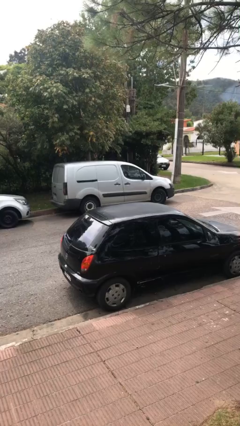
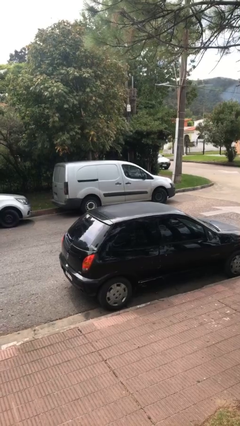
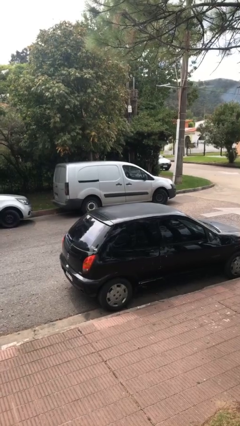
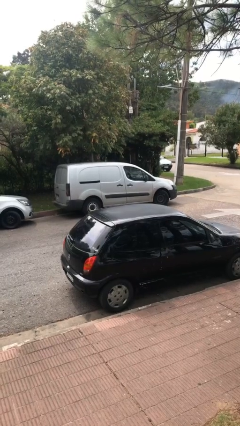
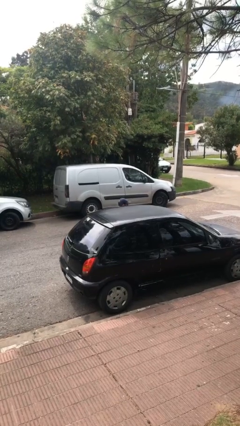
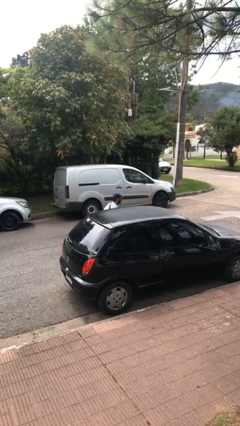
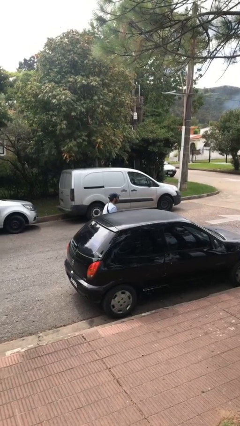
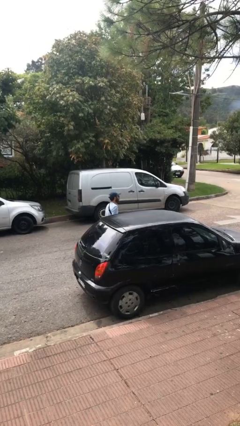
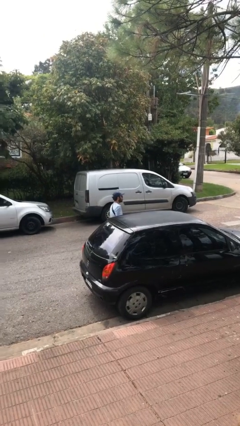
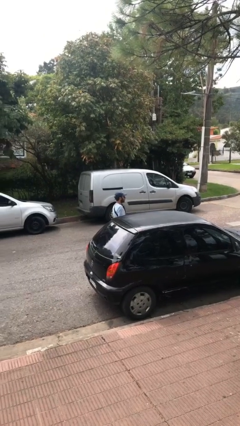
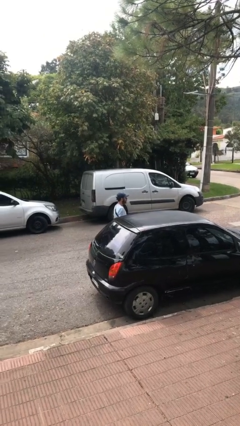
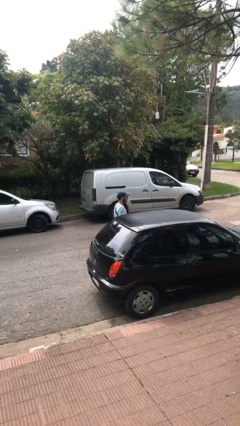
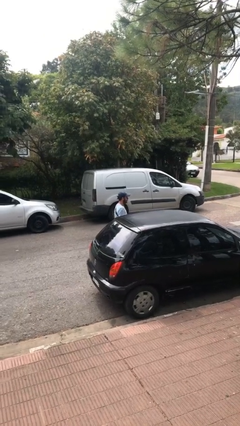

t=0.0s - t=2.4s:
person exits car

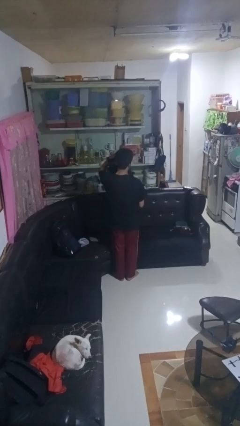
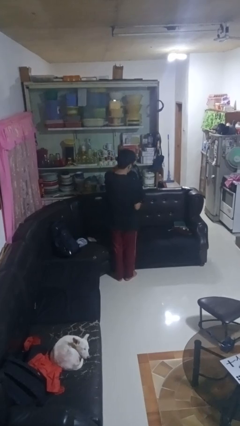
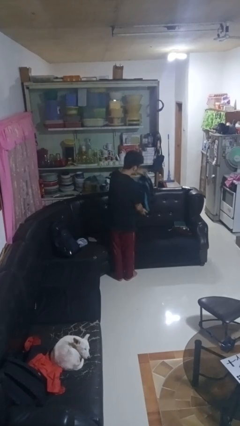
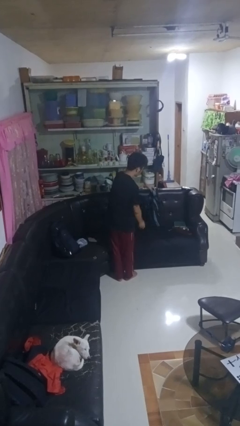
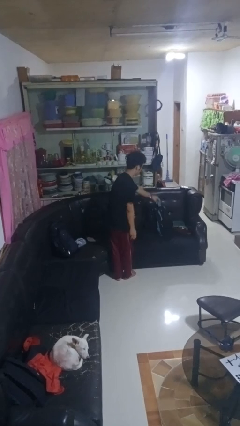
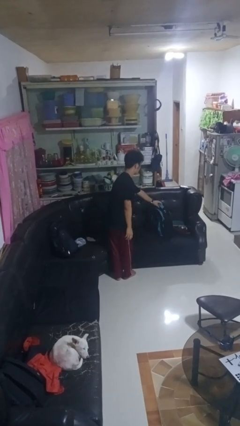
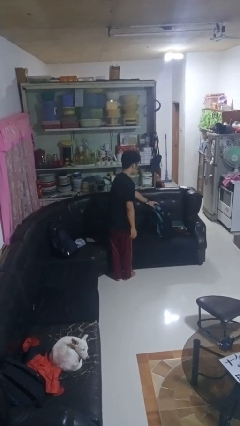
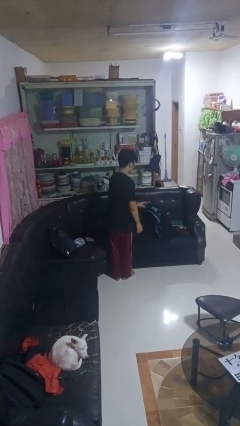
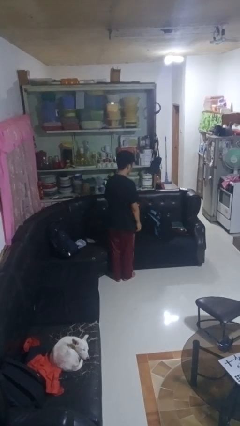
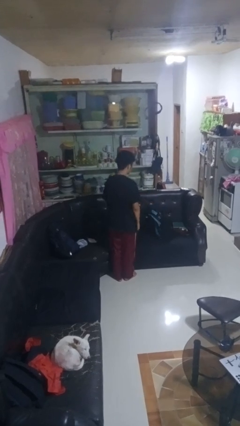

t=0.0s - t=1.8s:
person puts down object on couch

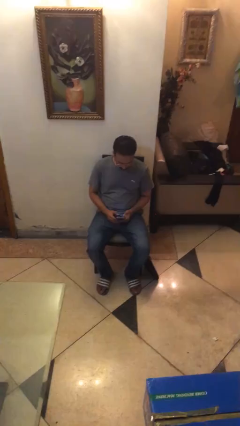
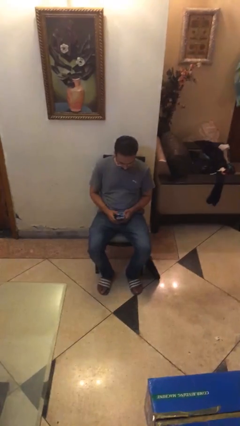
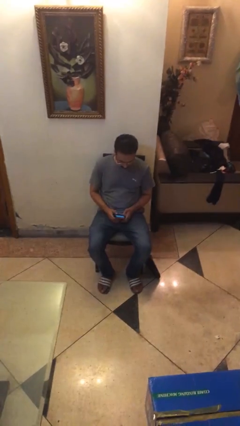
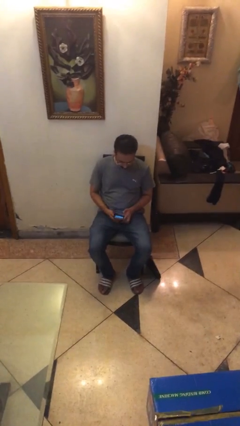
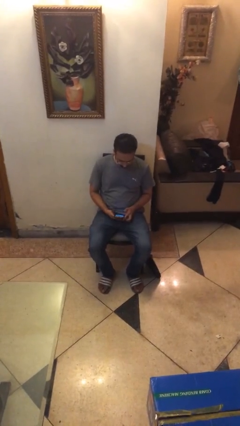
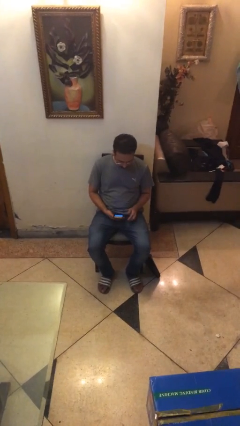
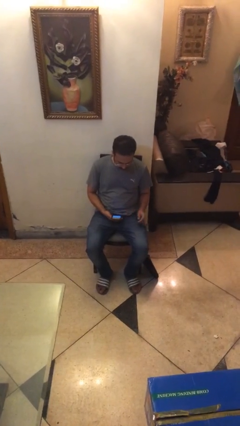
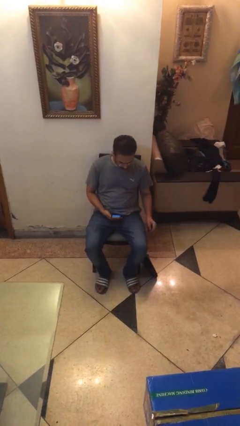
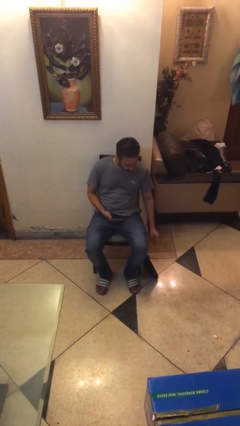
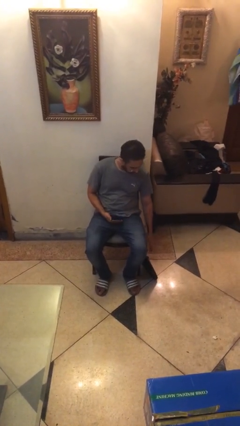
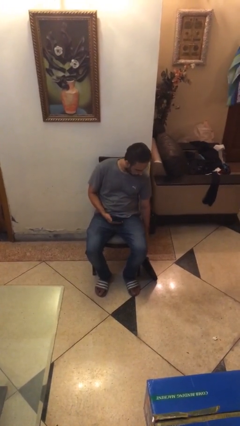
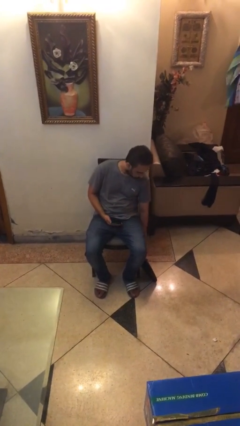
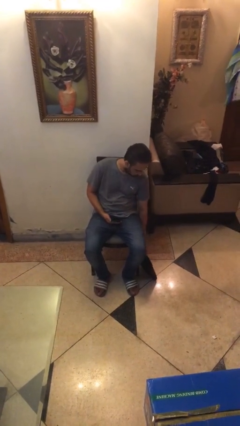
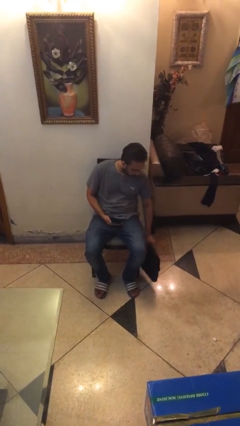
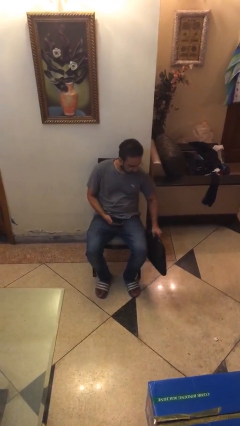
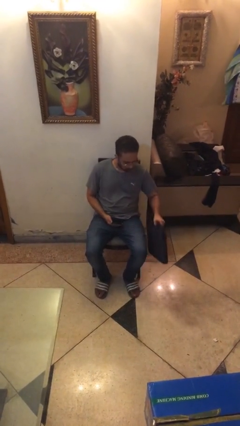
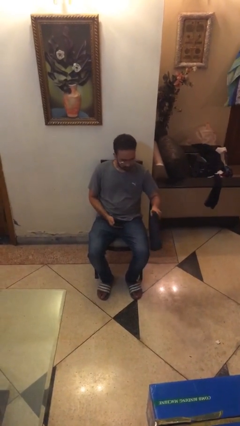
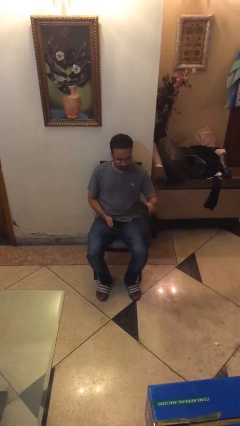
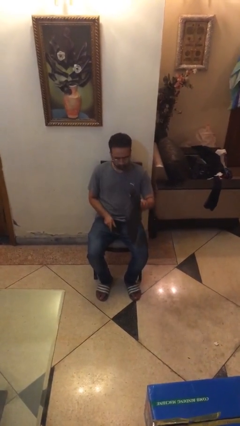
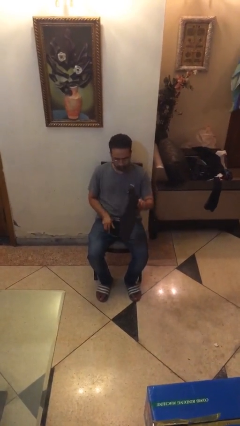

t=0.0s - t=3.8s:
person picks up object from floor

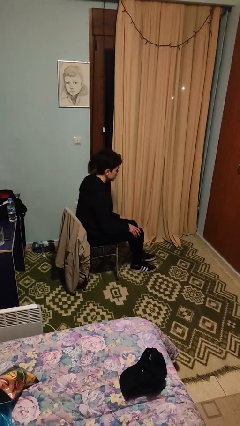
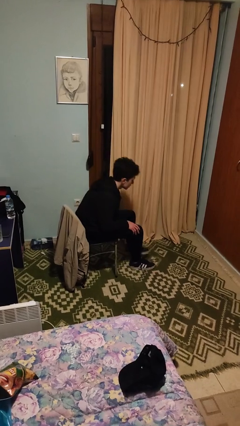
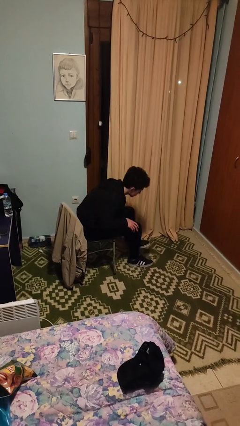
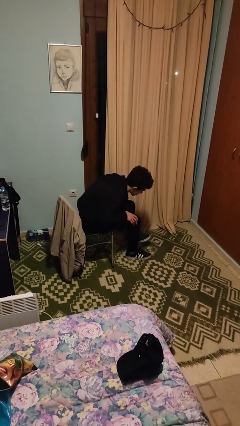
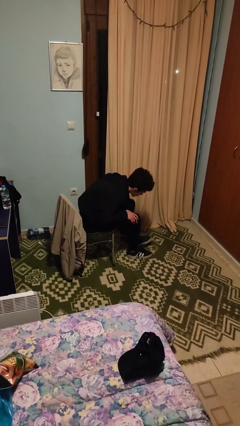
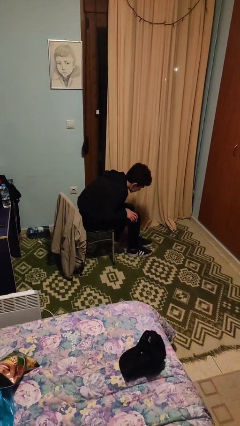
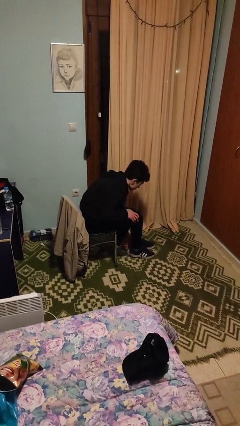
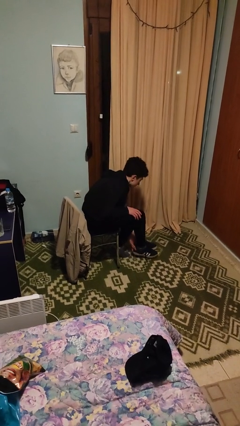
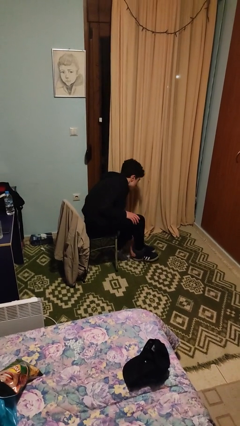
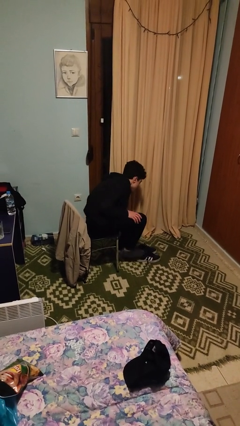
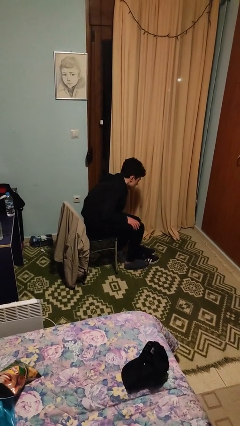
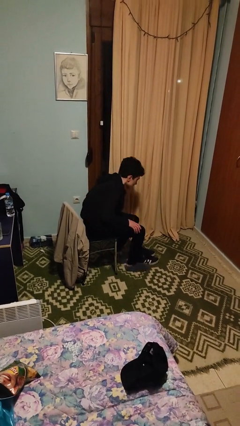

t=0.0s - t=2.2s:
person takes off shoes

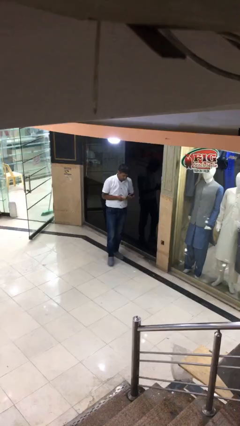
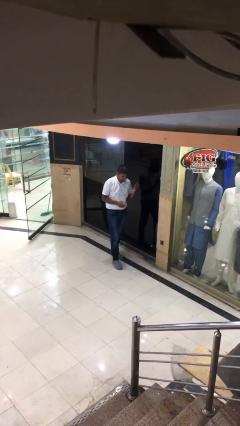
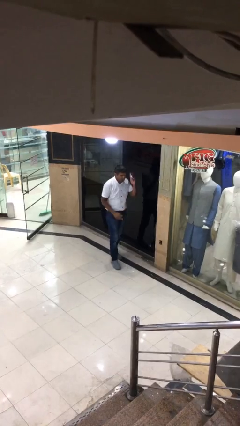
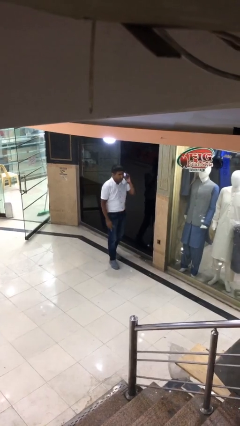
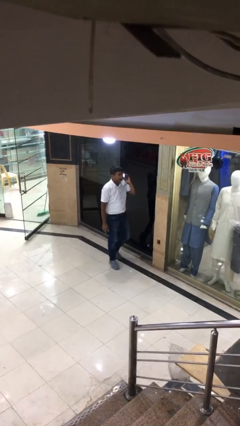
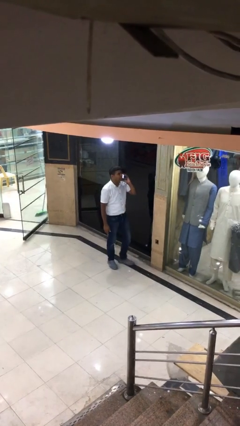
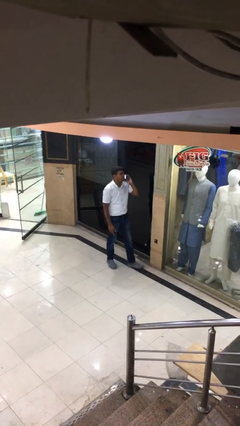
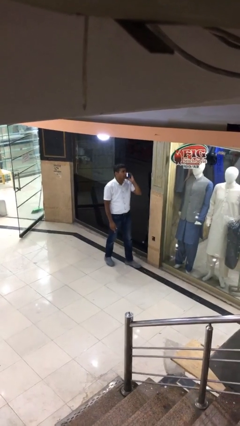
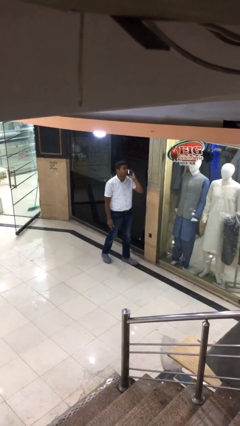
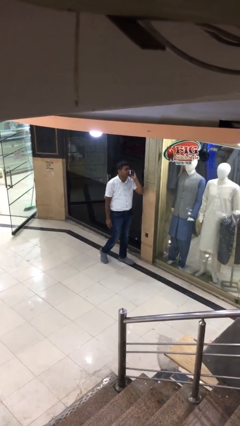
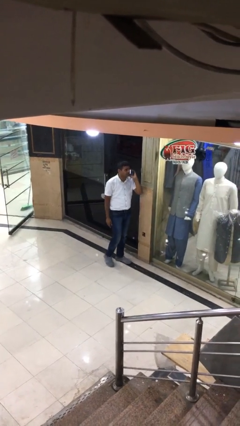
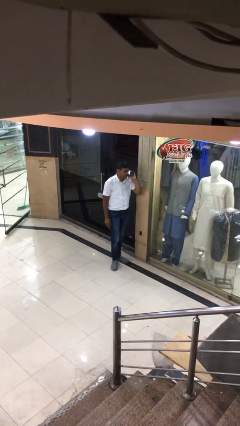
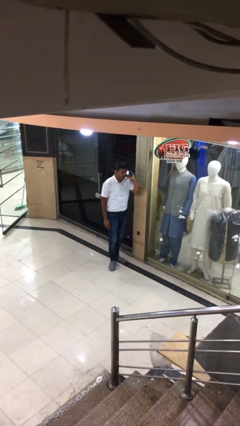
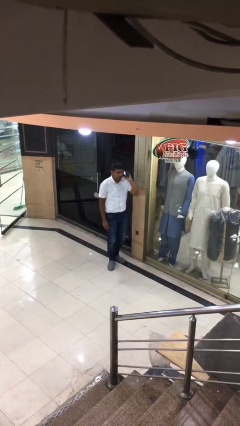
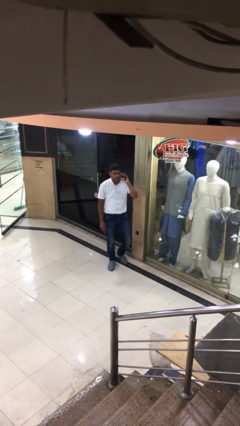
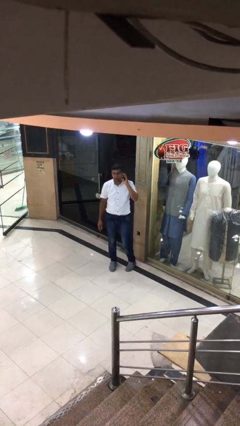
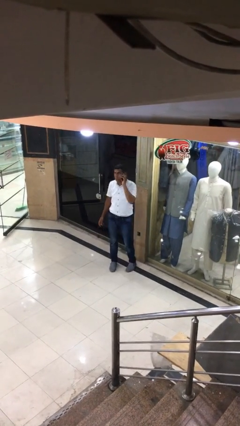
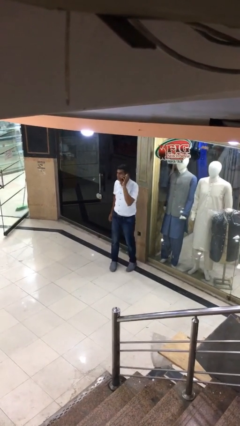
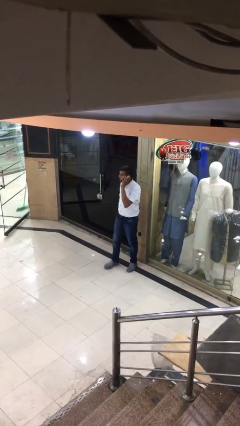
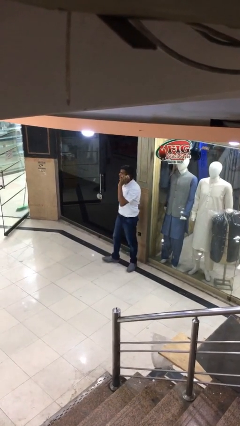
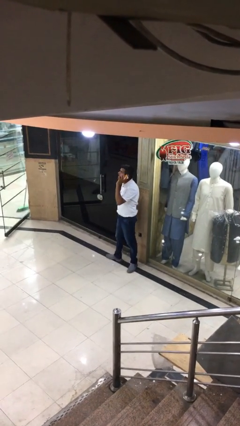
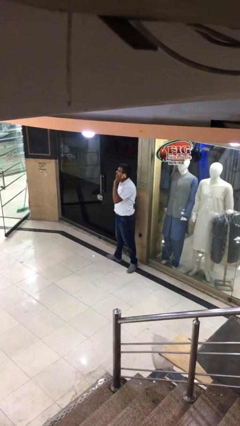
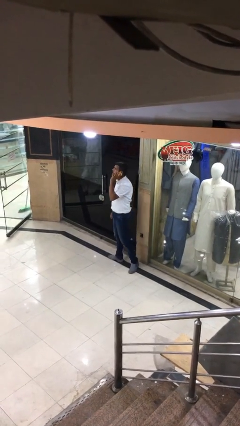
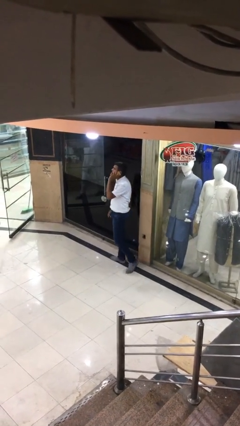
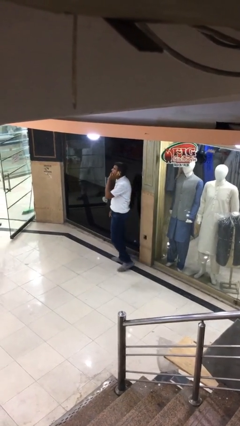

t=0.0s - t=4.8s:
person talks on phone

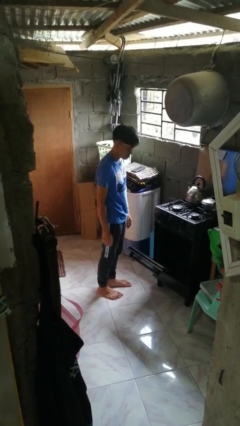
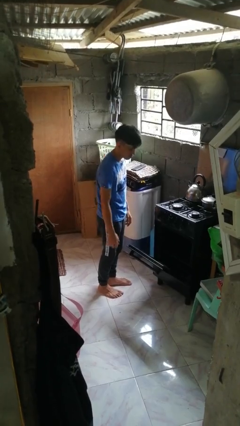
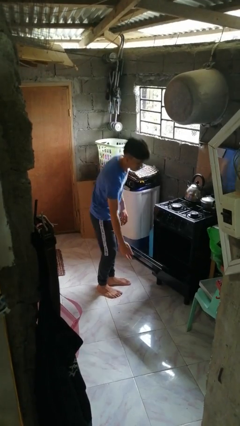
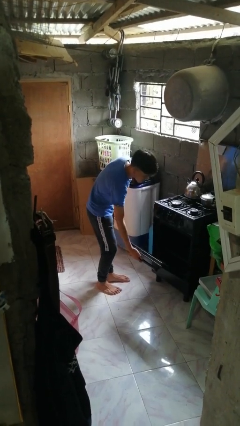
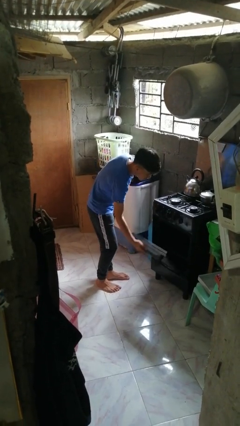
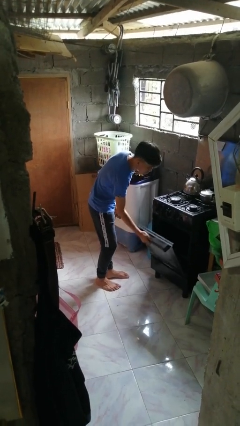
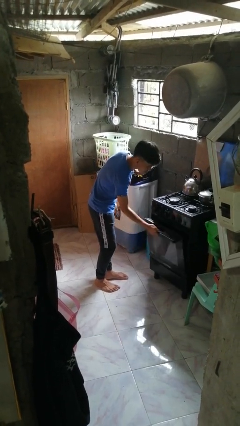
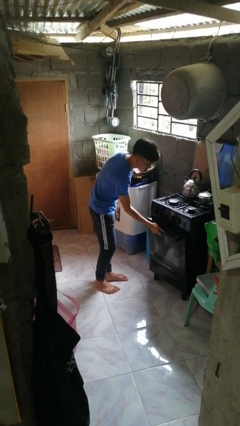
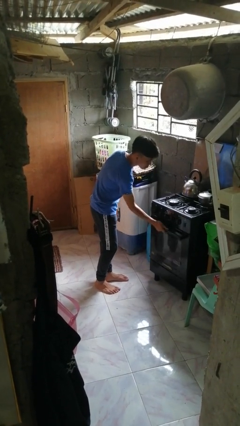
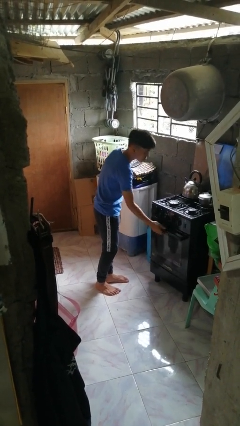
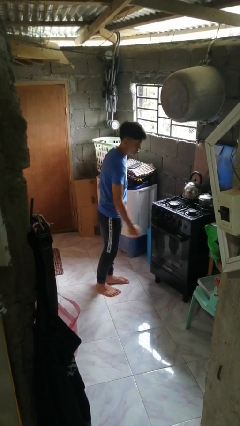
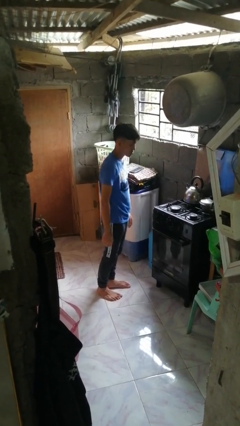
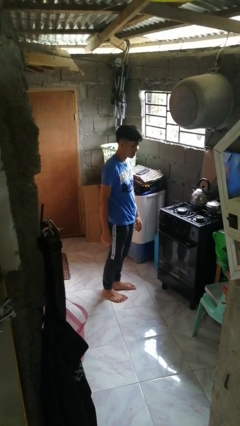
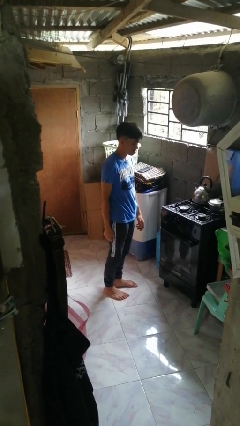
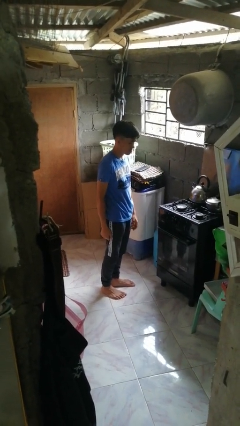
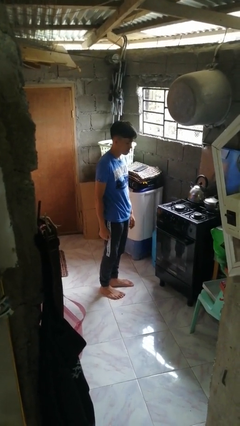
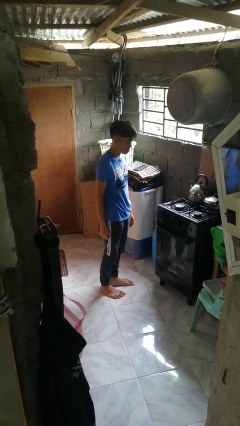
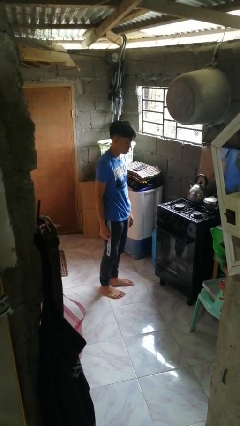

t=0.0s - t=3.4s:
person closes oven door
